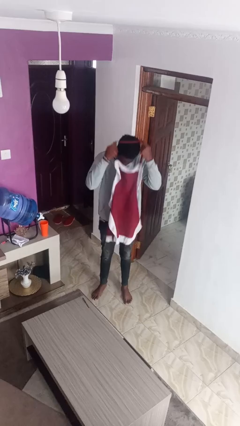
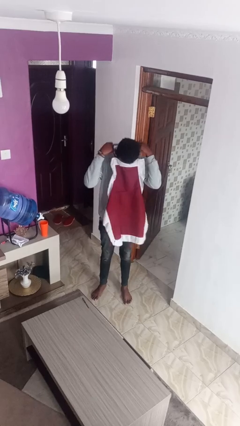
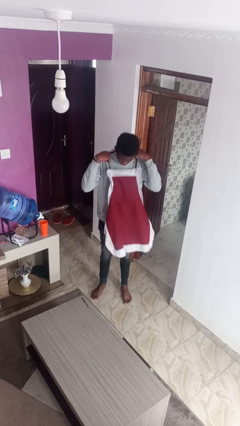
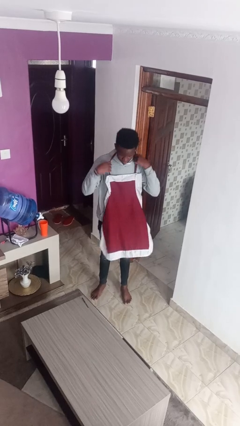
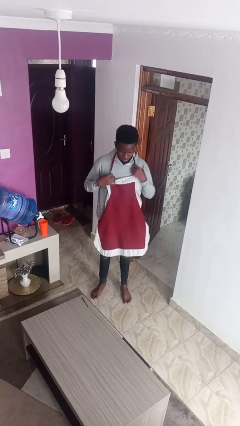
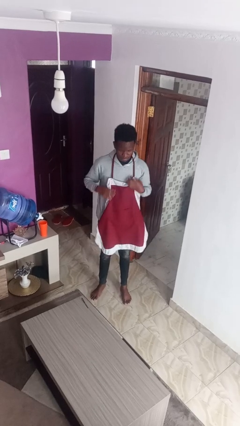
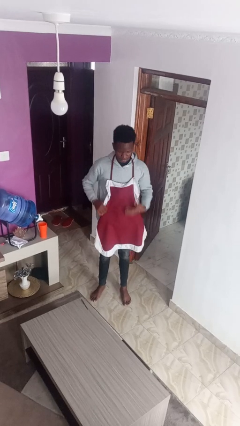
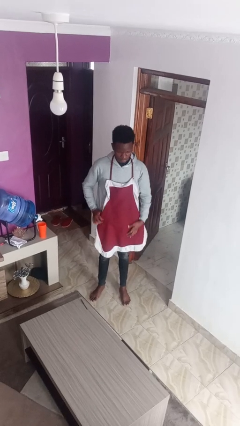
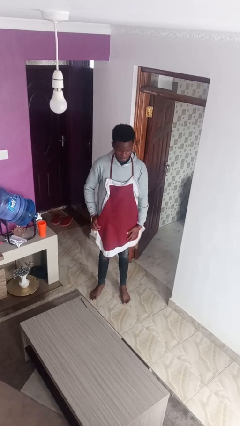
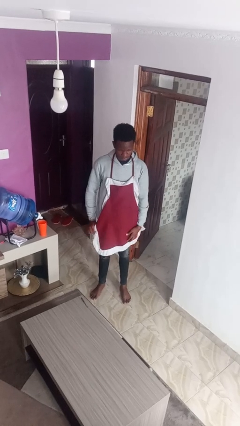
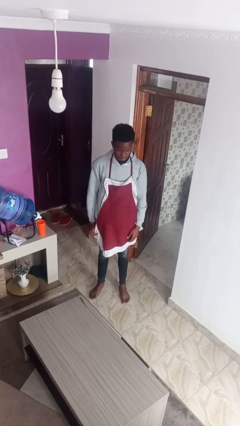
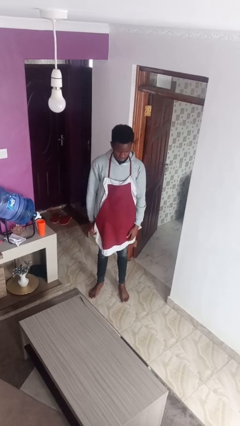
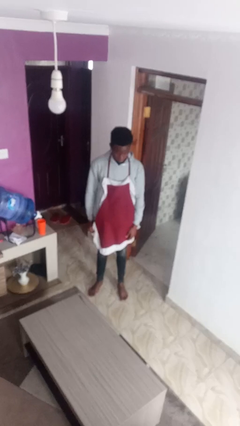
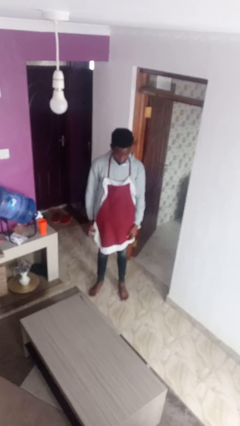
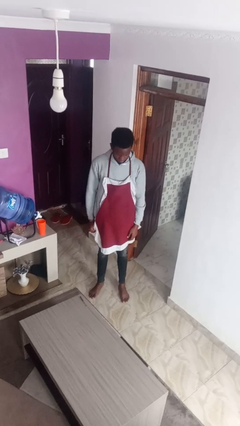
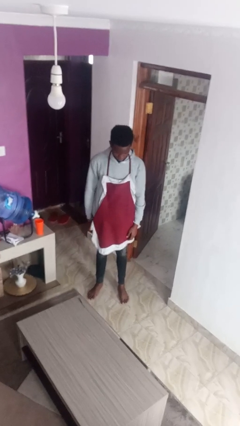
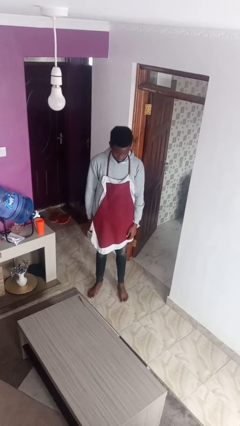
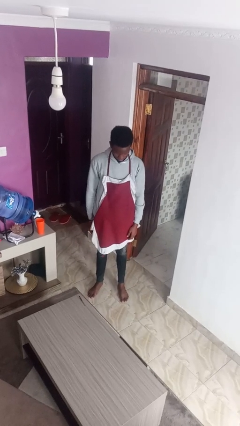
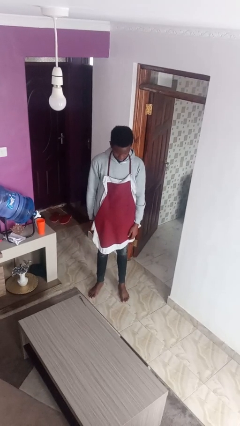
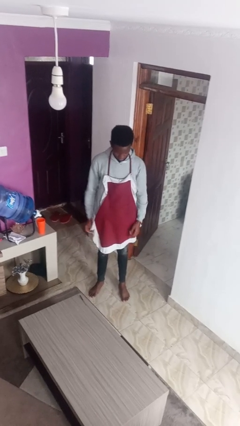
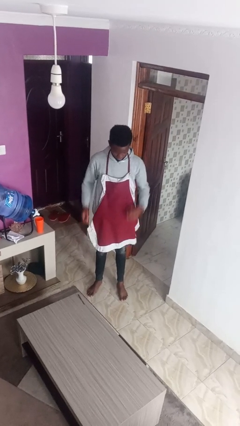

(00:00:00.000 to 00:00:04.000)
person puts on apron

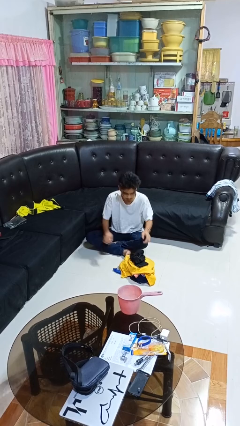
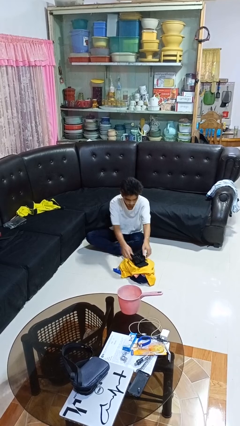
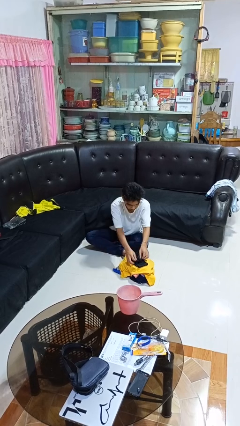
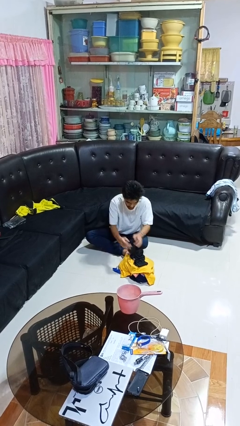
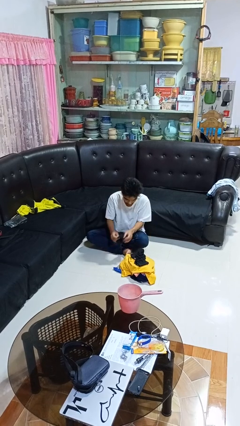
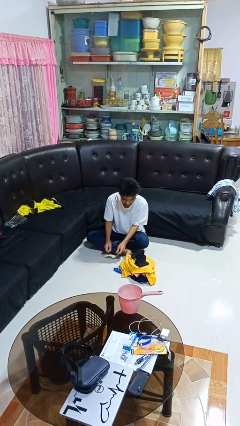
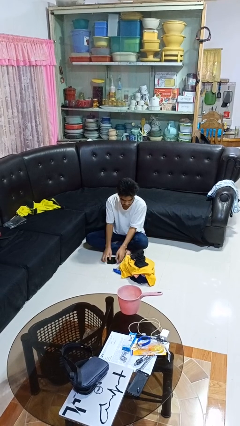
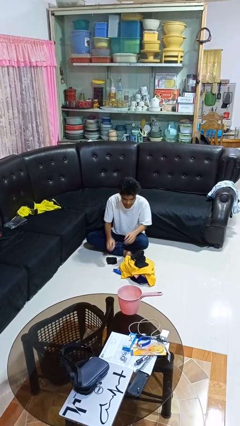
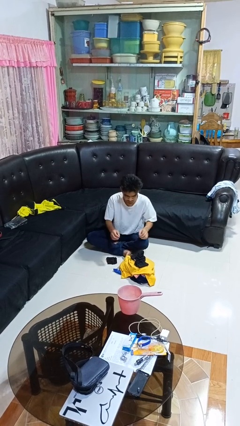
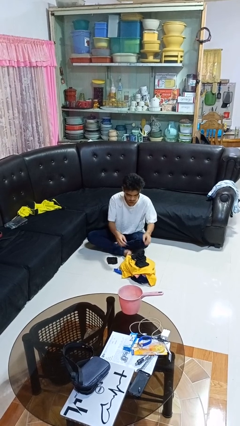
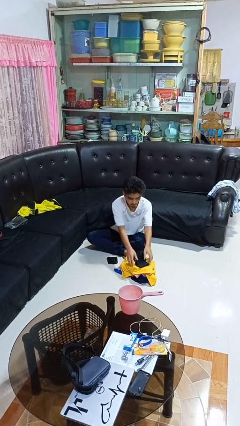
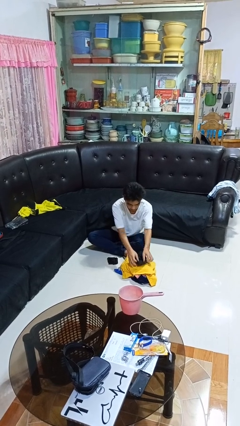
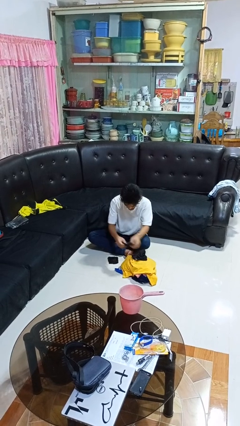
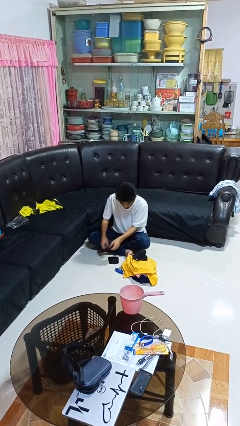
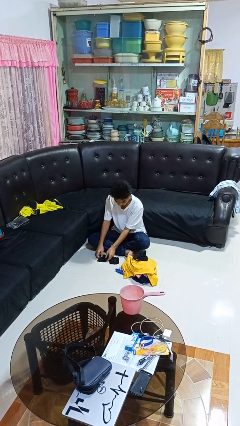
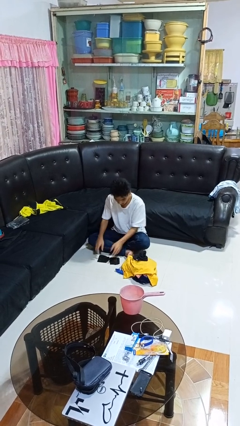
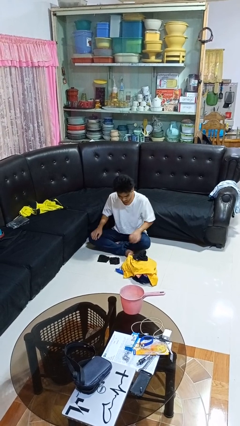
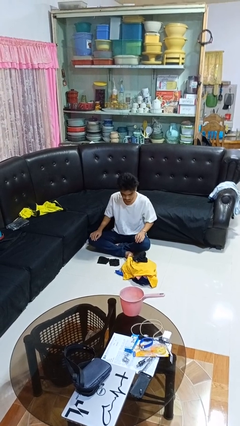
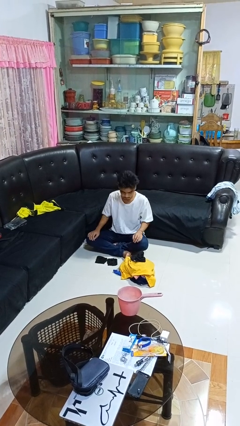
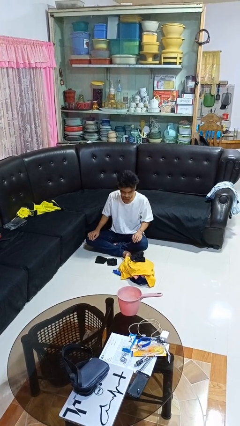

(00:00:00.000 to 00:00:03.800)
person folds socks

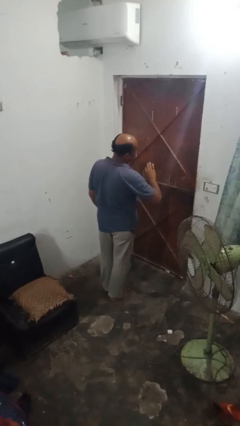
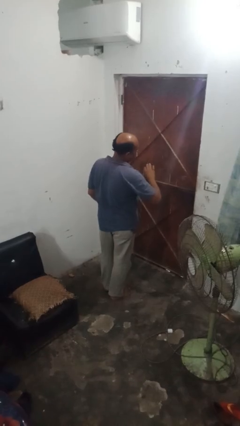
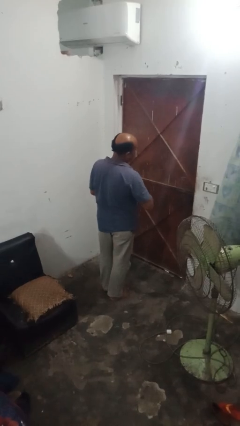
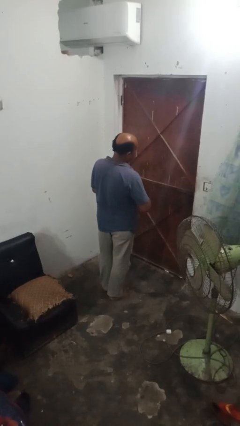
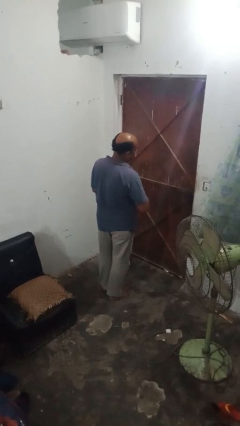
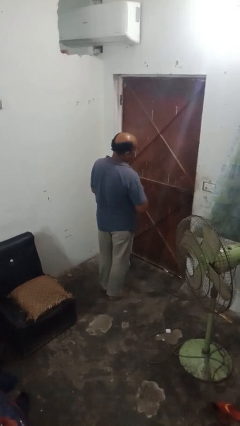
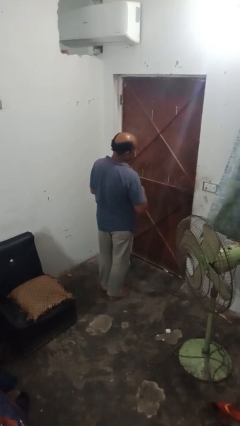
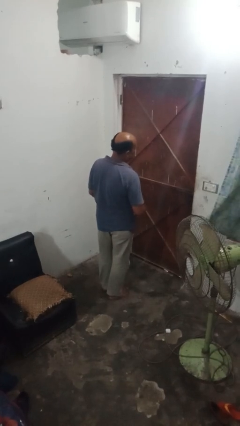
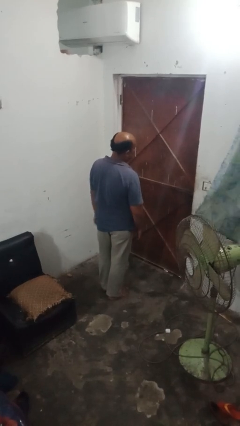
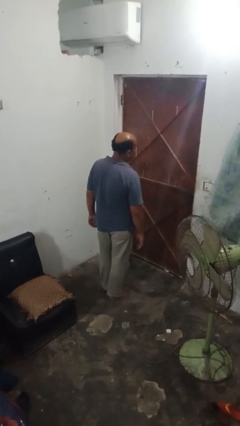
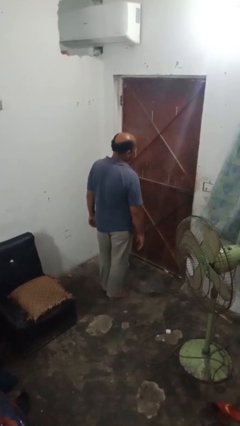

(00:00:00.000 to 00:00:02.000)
person takes off ring

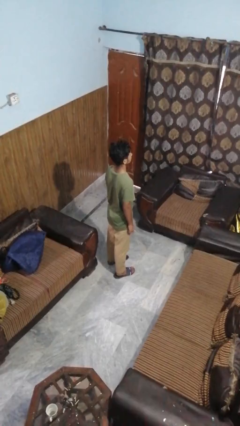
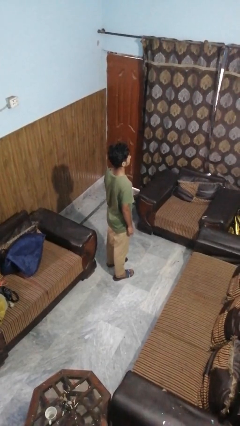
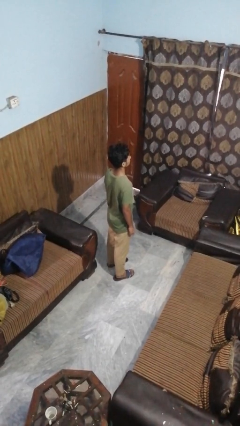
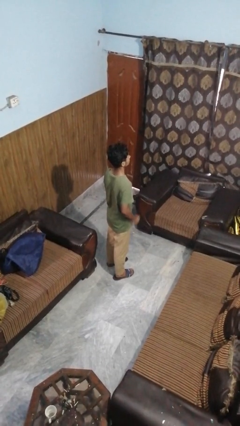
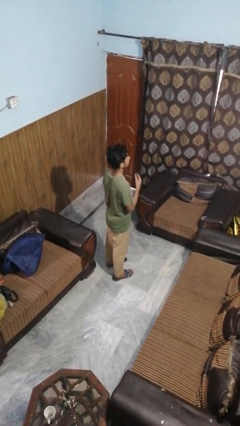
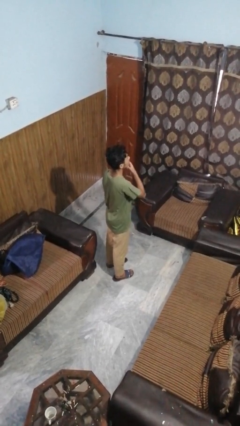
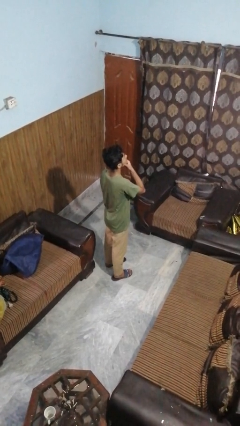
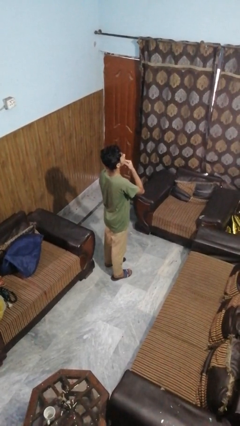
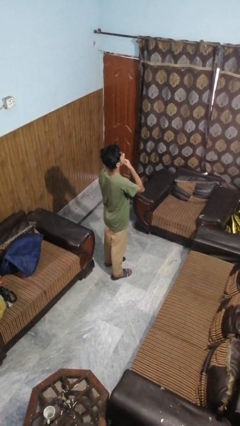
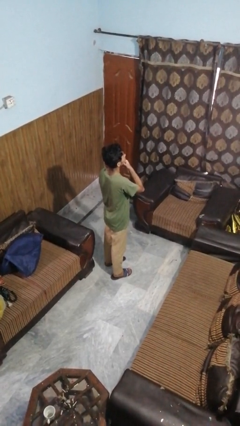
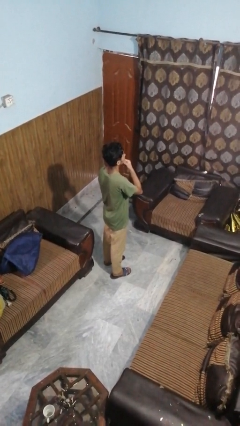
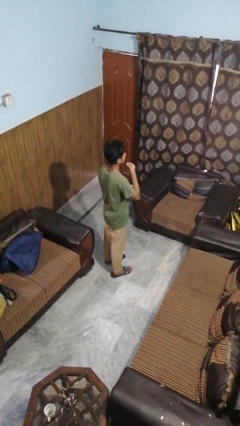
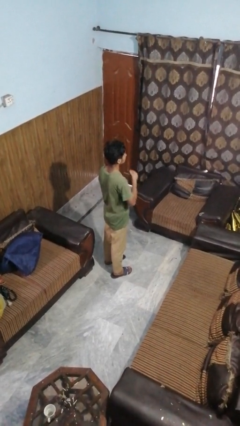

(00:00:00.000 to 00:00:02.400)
person strokes chin

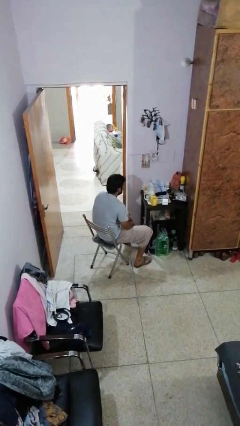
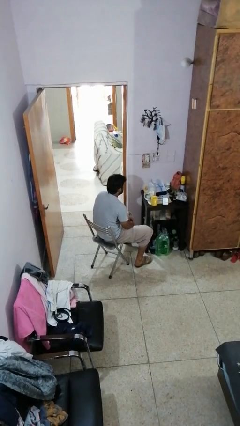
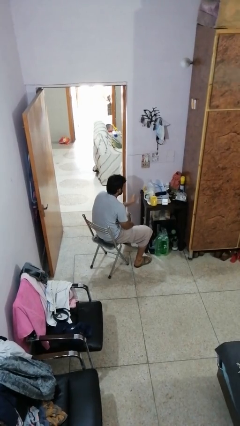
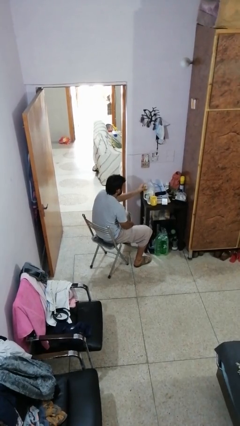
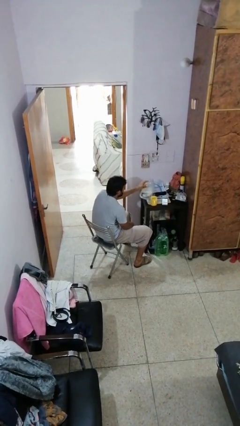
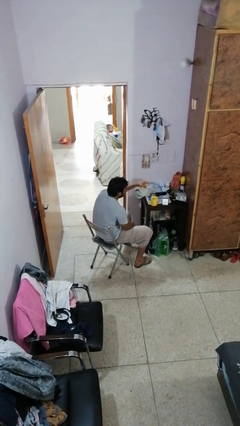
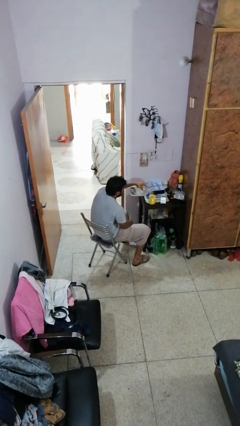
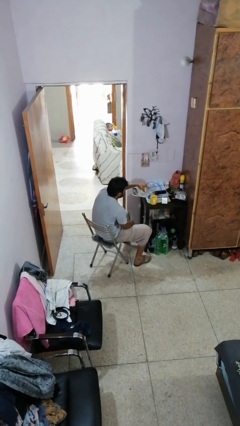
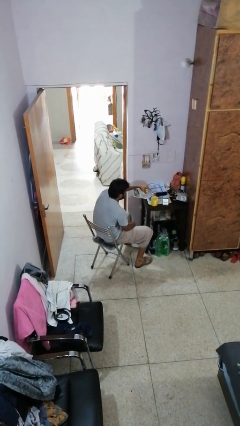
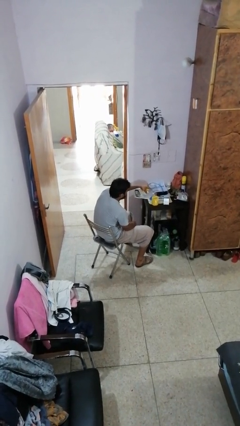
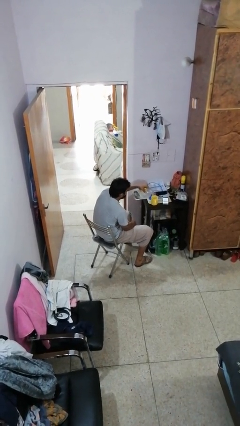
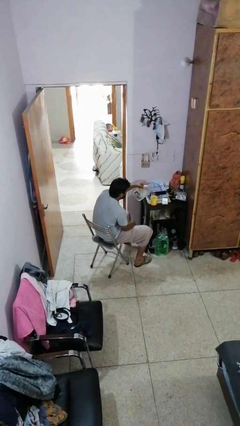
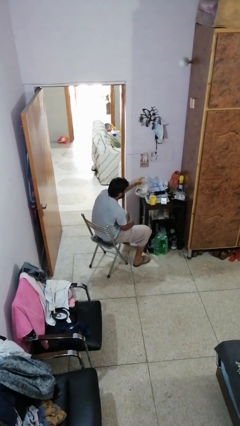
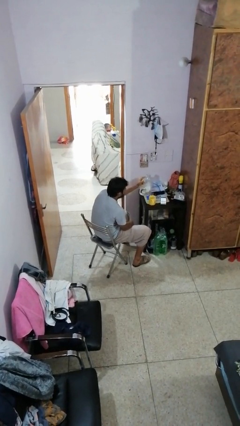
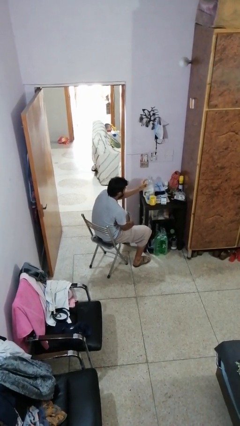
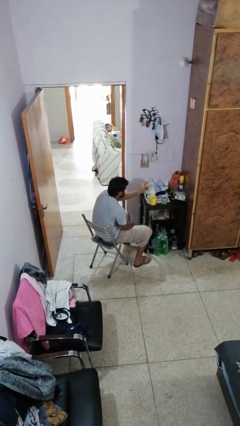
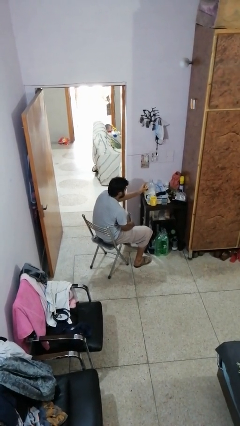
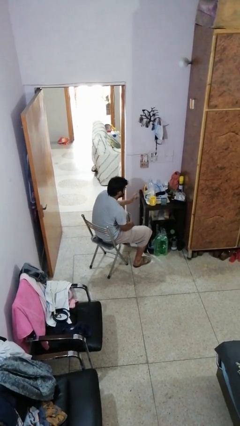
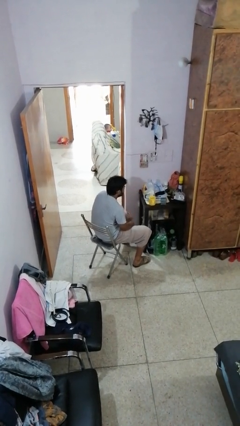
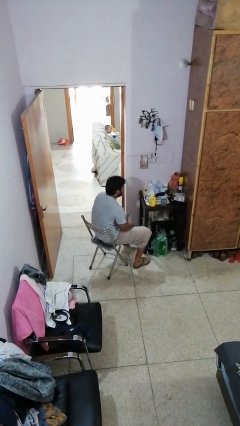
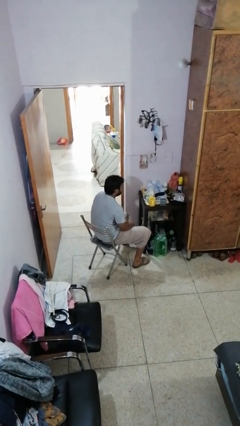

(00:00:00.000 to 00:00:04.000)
person pours liquid into cup

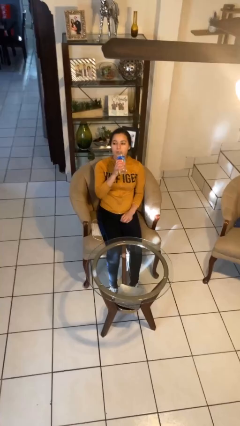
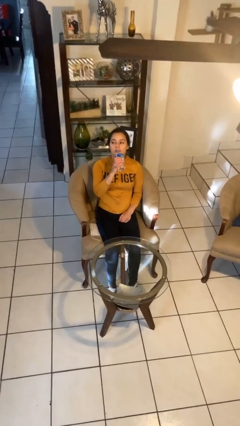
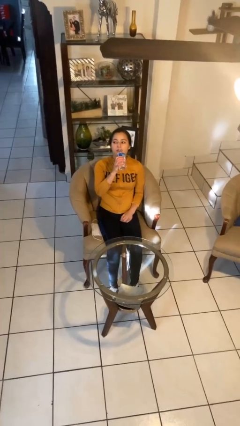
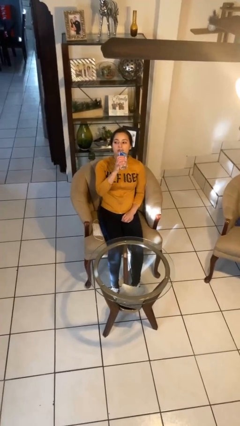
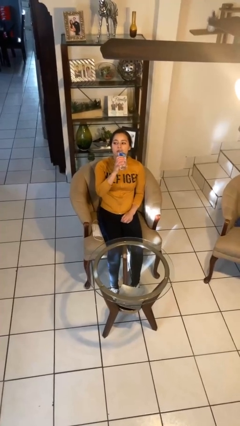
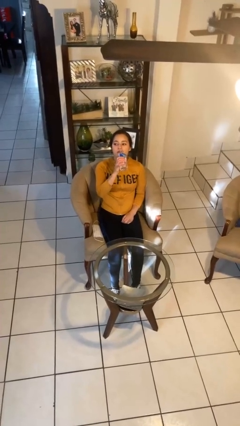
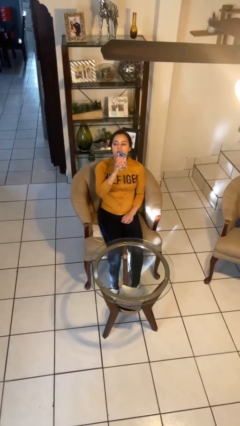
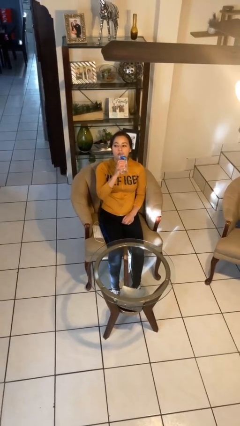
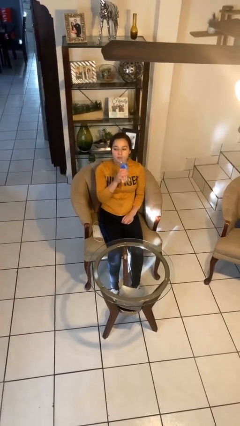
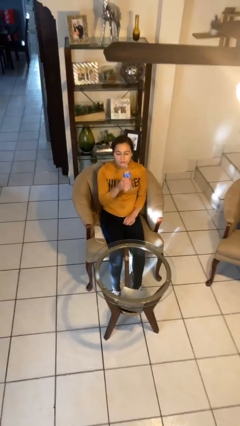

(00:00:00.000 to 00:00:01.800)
person drinks from bottle
